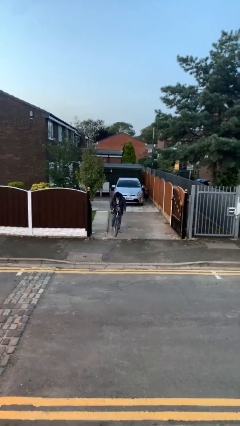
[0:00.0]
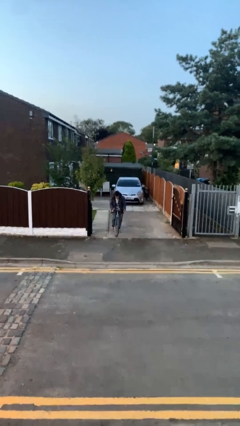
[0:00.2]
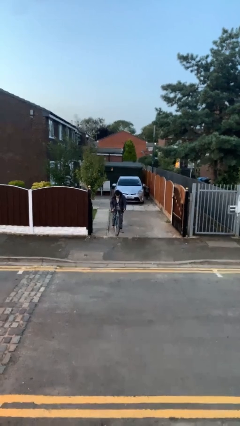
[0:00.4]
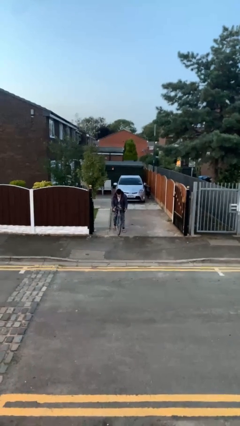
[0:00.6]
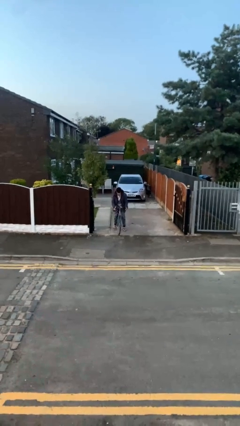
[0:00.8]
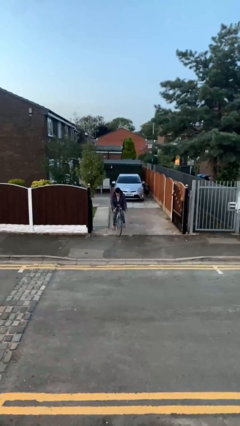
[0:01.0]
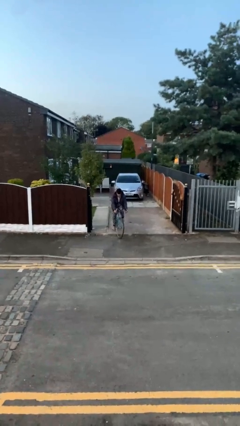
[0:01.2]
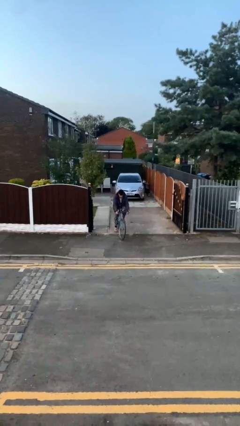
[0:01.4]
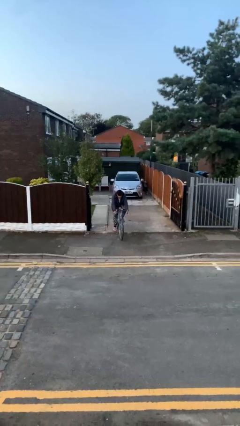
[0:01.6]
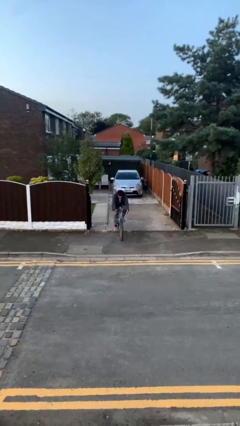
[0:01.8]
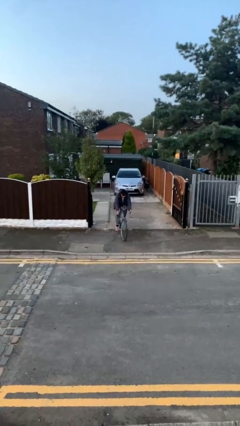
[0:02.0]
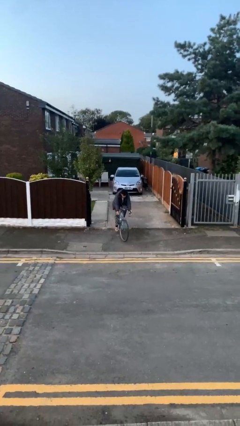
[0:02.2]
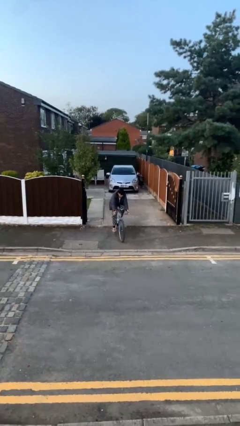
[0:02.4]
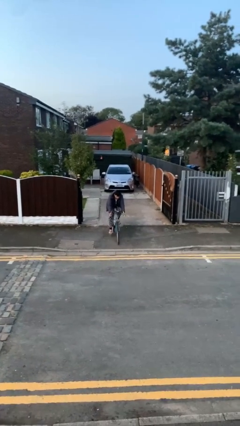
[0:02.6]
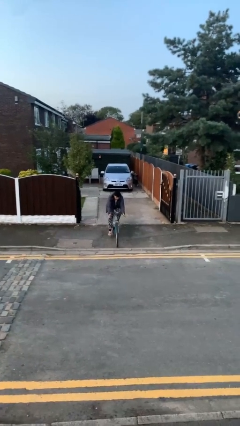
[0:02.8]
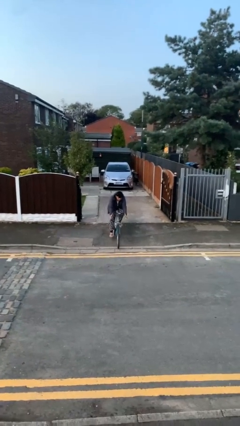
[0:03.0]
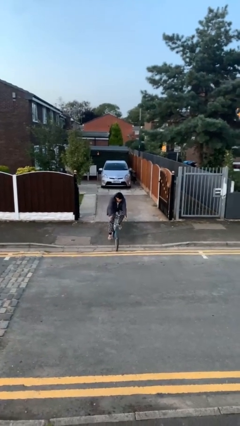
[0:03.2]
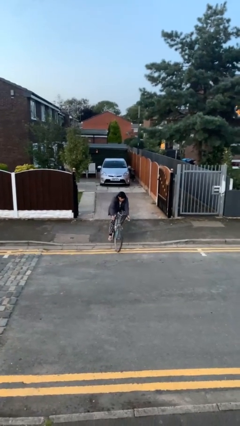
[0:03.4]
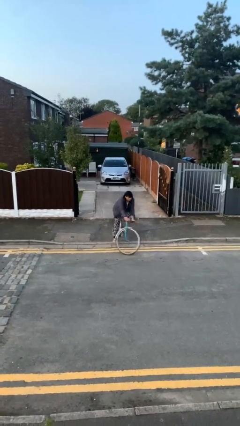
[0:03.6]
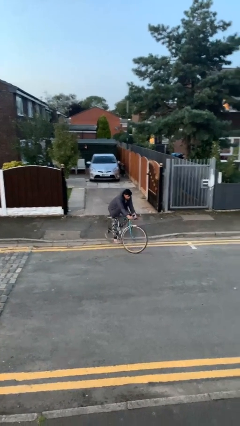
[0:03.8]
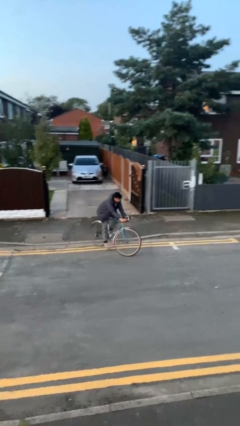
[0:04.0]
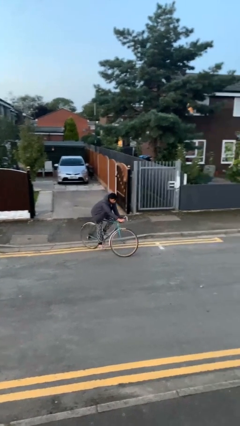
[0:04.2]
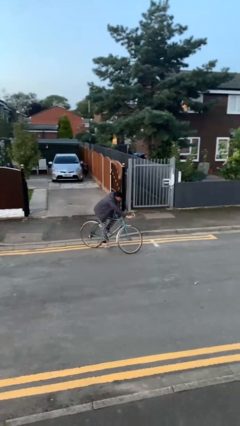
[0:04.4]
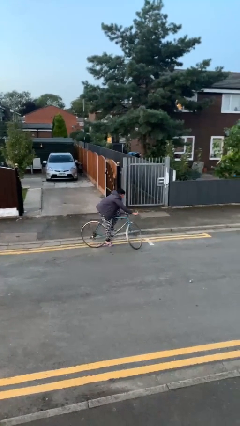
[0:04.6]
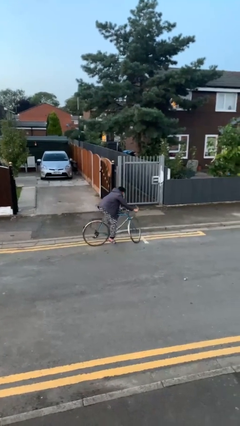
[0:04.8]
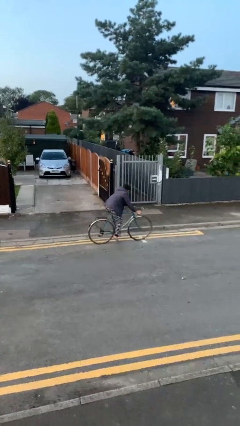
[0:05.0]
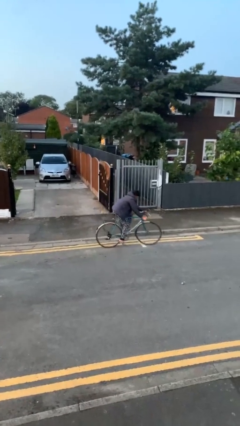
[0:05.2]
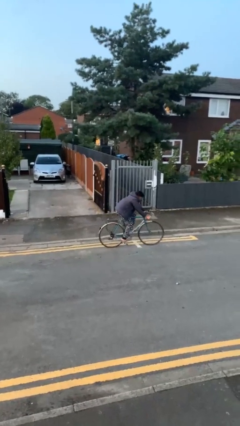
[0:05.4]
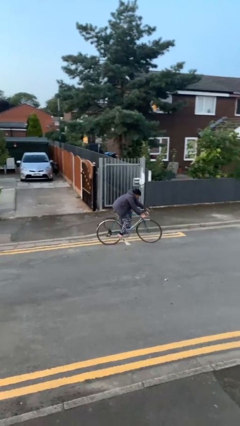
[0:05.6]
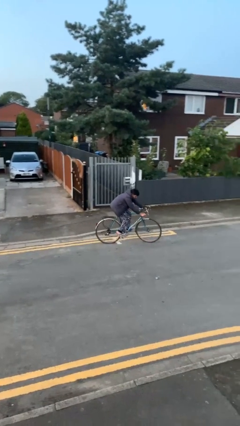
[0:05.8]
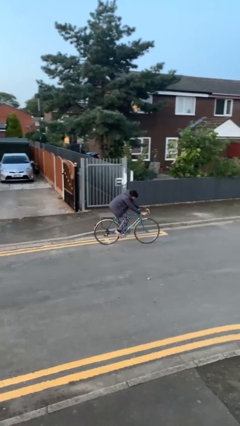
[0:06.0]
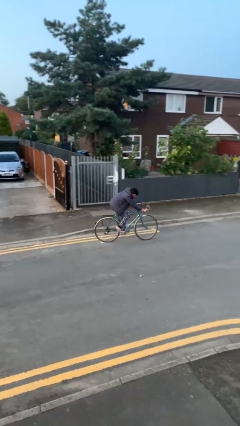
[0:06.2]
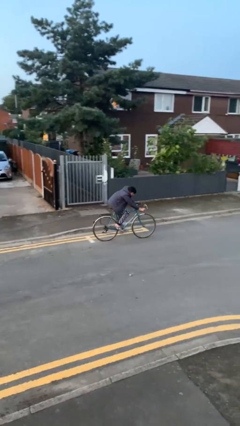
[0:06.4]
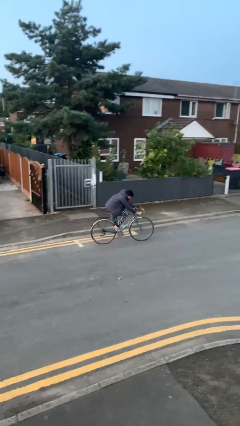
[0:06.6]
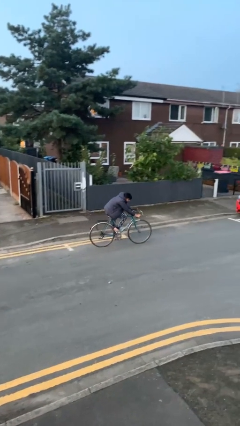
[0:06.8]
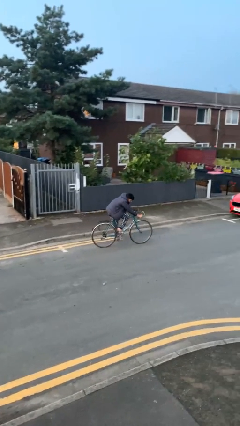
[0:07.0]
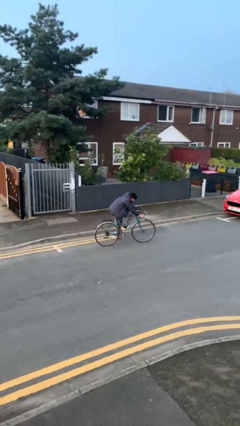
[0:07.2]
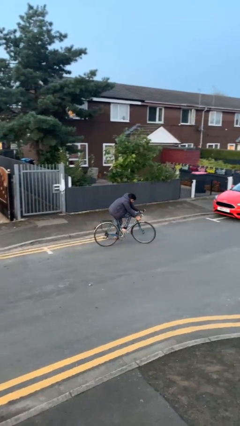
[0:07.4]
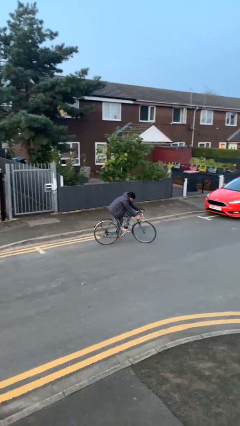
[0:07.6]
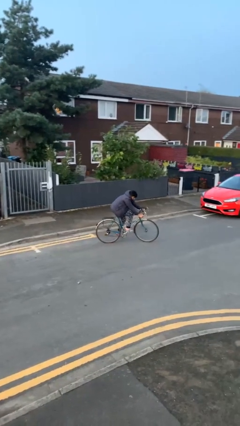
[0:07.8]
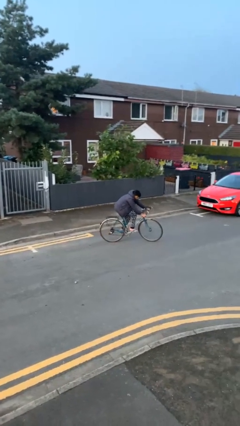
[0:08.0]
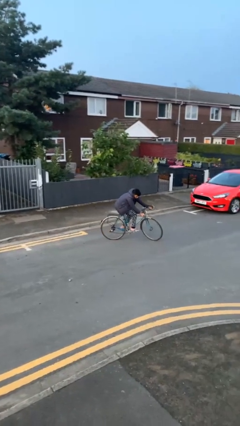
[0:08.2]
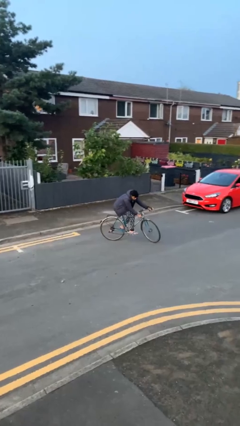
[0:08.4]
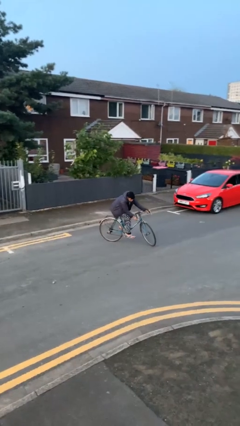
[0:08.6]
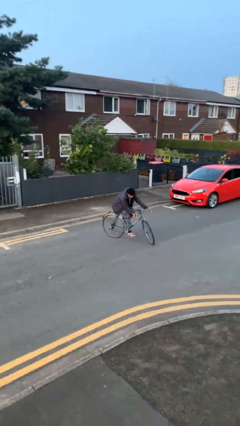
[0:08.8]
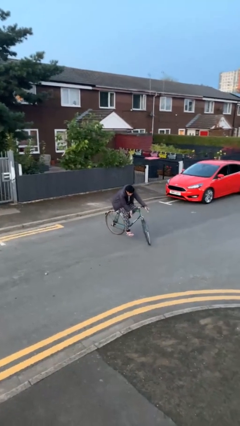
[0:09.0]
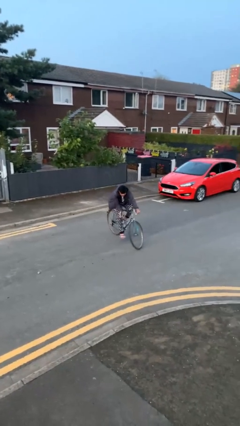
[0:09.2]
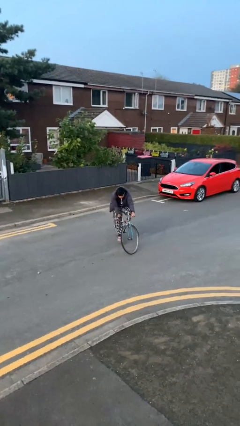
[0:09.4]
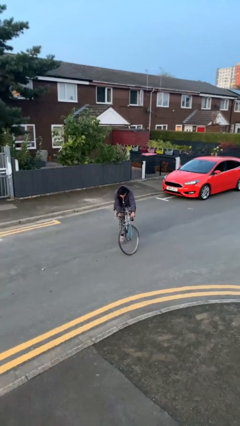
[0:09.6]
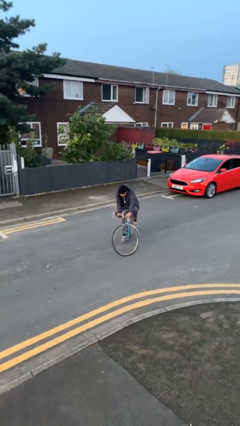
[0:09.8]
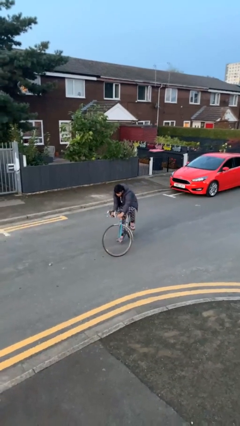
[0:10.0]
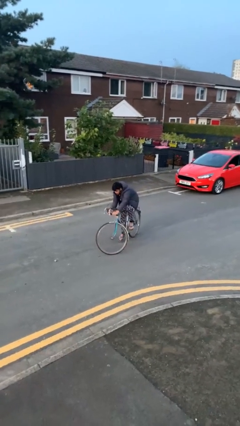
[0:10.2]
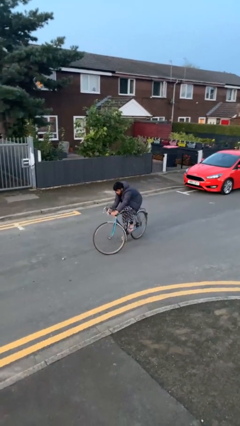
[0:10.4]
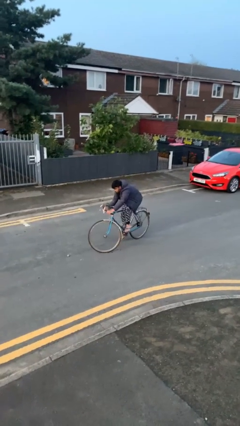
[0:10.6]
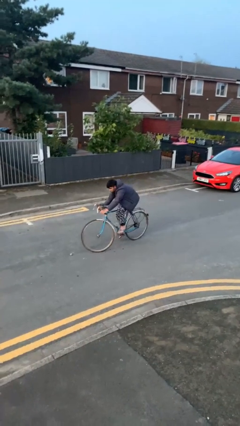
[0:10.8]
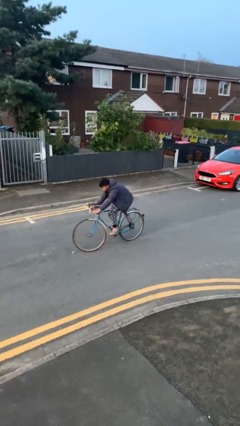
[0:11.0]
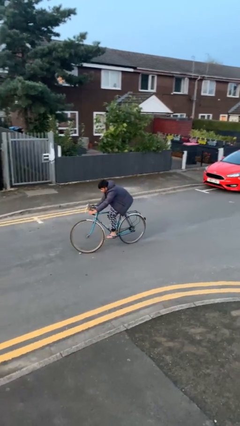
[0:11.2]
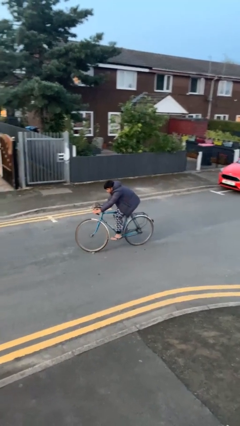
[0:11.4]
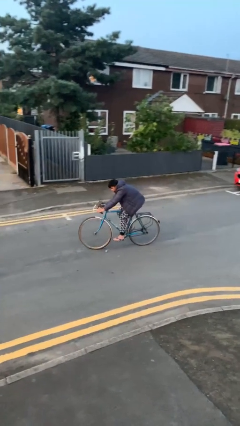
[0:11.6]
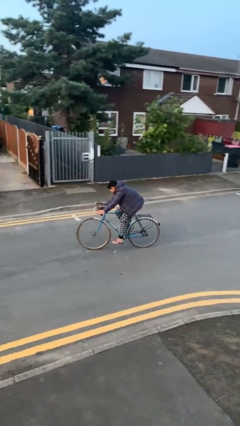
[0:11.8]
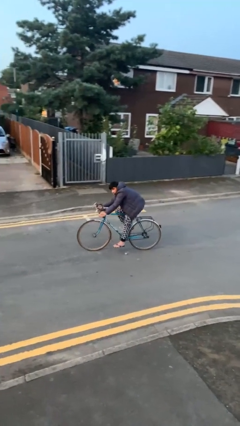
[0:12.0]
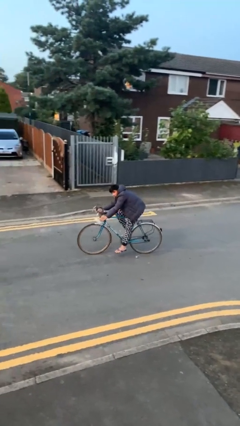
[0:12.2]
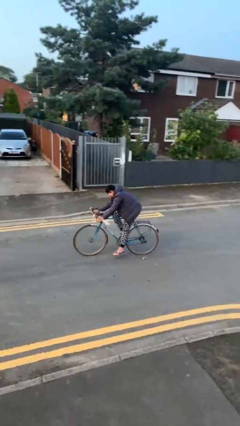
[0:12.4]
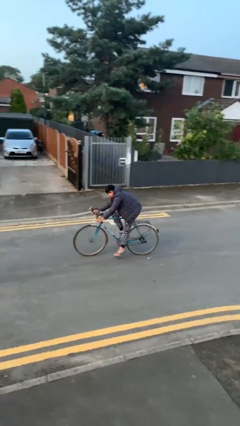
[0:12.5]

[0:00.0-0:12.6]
person rides bicycle

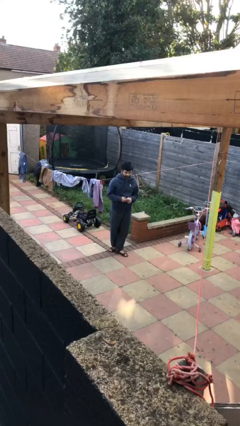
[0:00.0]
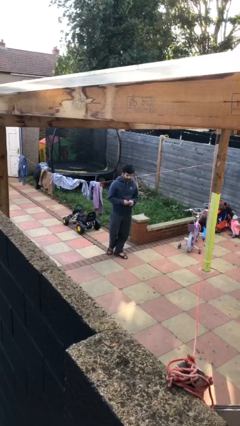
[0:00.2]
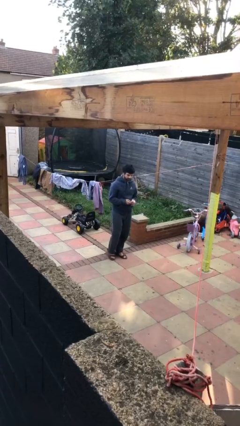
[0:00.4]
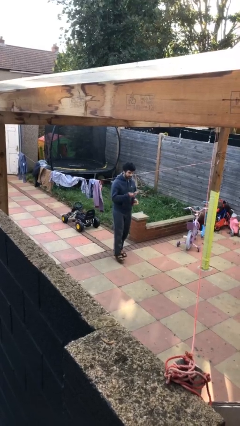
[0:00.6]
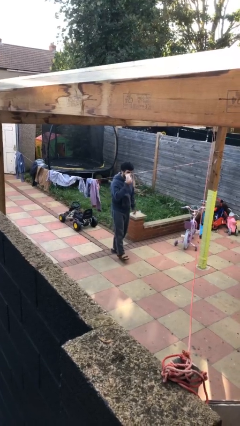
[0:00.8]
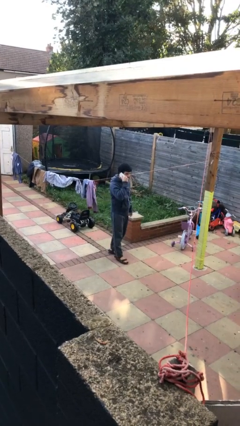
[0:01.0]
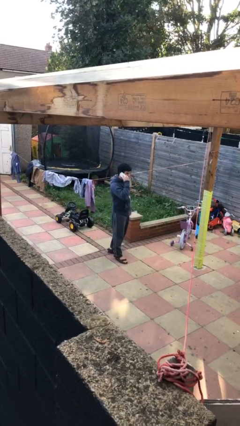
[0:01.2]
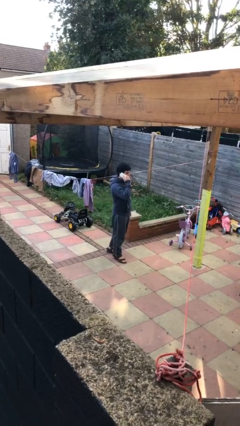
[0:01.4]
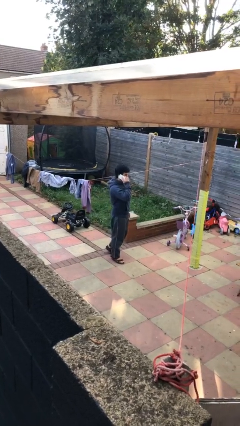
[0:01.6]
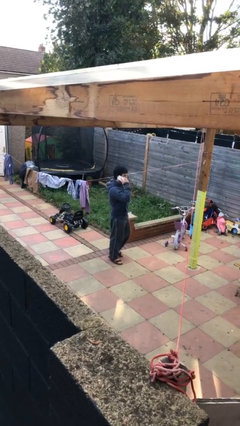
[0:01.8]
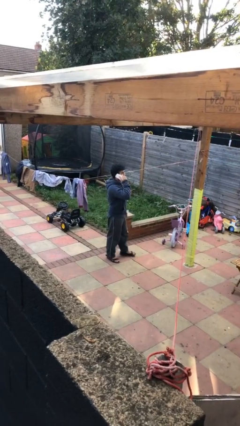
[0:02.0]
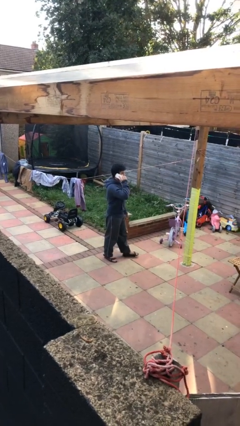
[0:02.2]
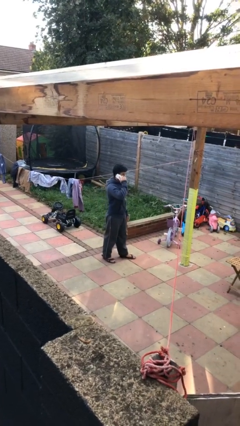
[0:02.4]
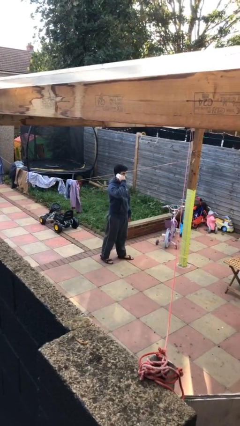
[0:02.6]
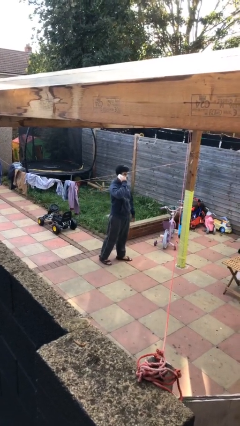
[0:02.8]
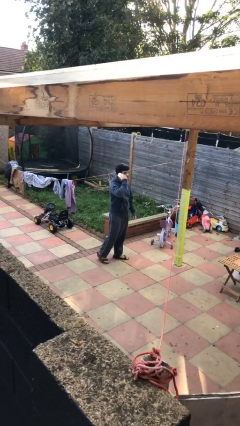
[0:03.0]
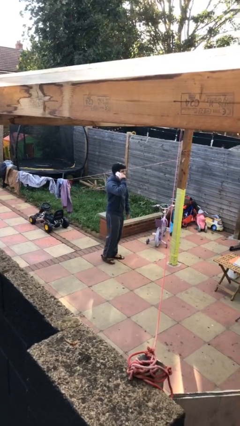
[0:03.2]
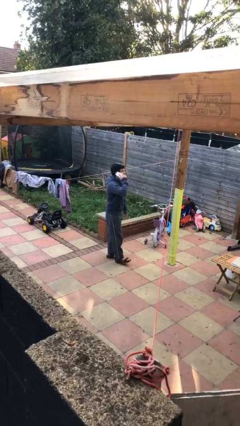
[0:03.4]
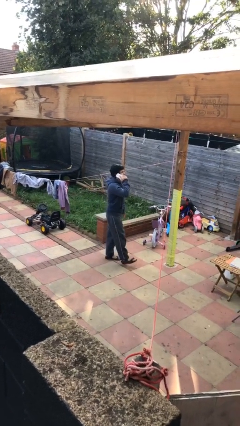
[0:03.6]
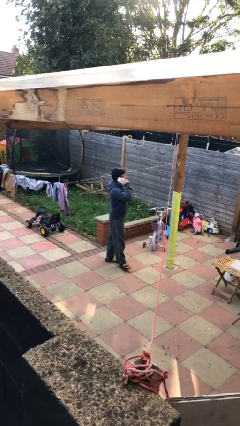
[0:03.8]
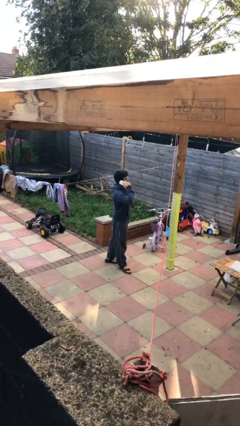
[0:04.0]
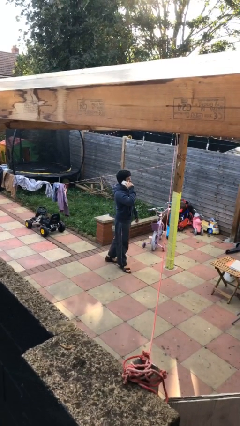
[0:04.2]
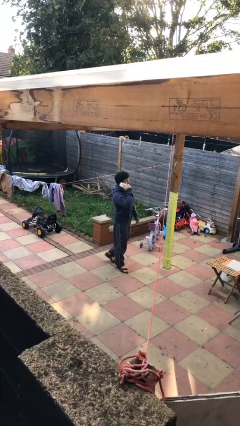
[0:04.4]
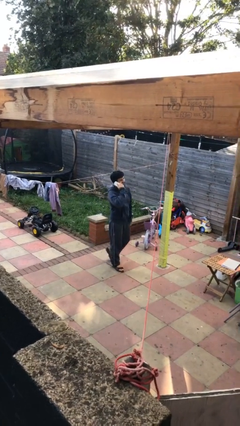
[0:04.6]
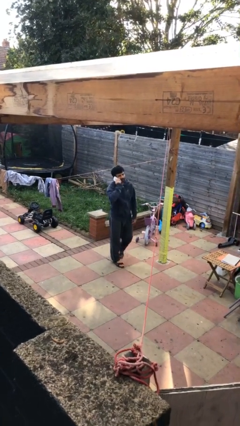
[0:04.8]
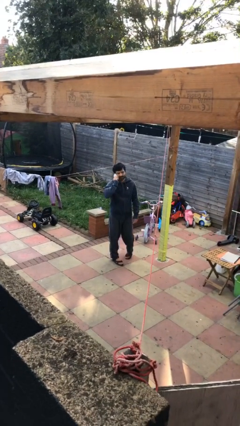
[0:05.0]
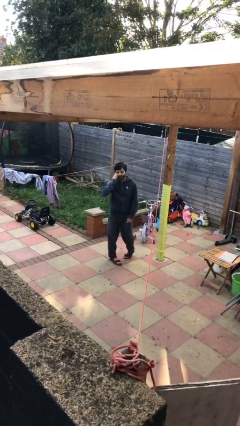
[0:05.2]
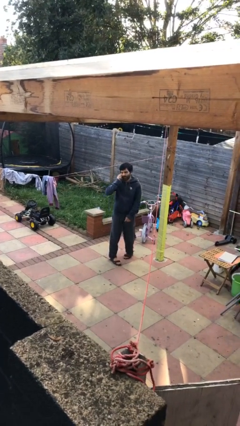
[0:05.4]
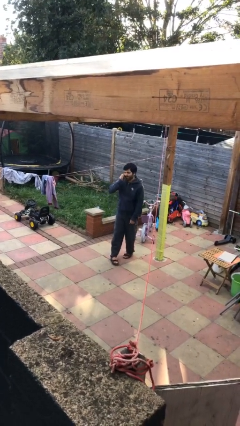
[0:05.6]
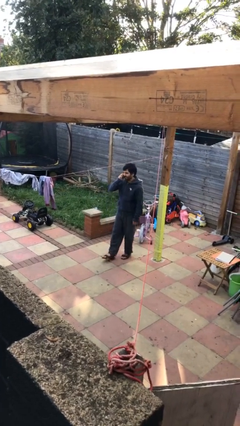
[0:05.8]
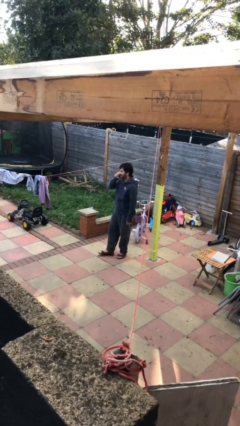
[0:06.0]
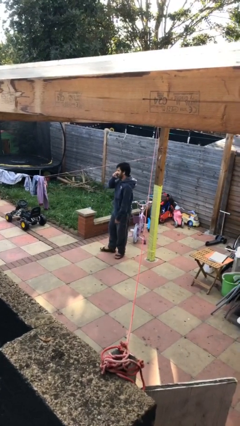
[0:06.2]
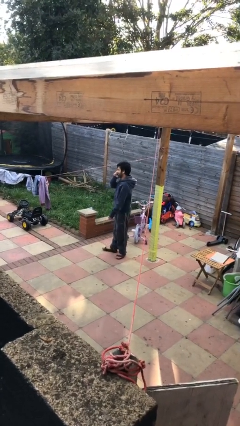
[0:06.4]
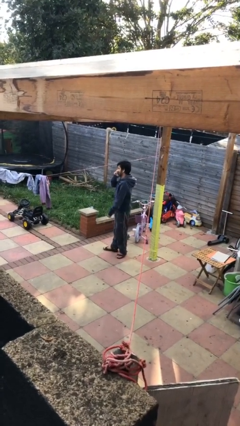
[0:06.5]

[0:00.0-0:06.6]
person talks on phone
